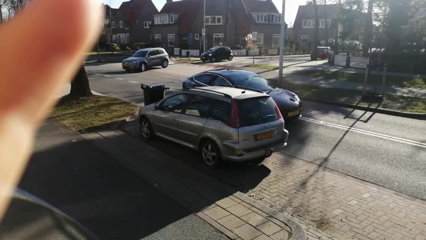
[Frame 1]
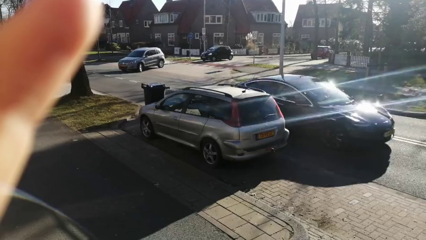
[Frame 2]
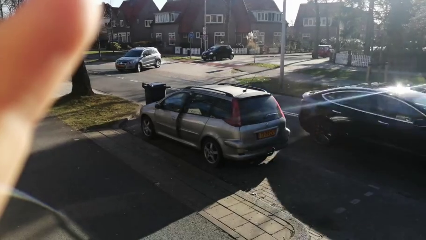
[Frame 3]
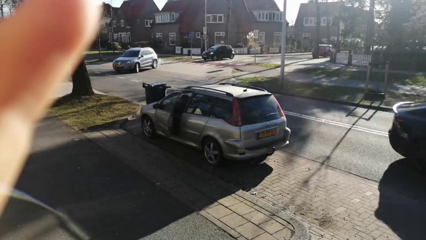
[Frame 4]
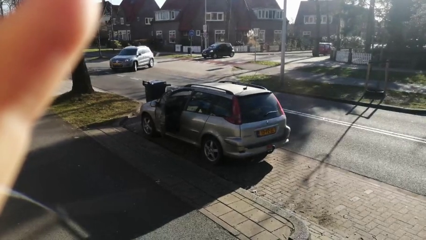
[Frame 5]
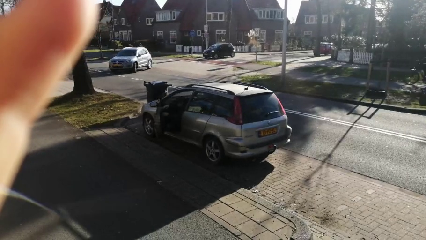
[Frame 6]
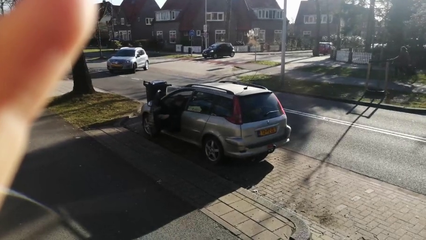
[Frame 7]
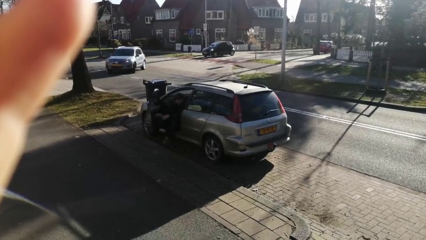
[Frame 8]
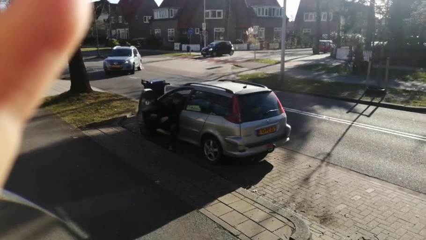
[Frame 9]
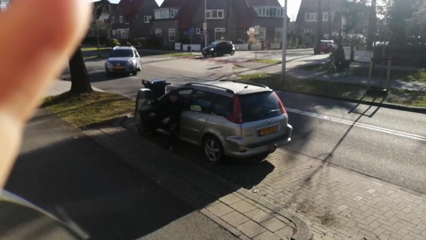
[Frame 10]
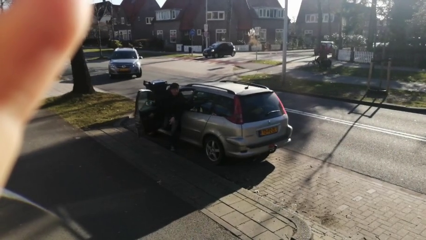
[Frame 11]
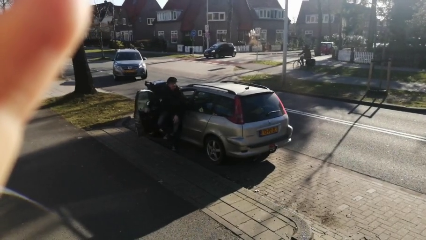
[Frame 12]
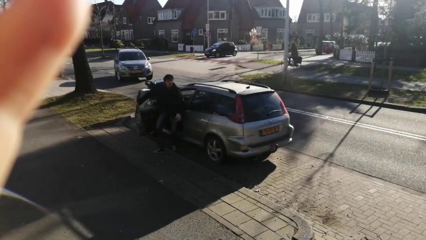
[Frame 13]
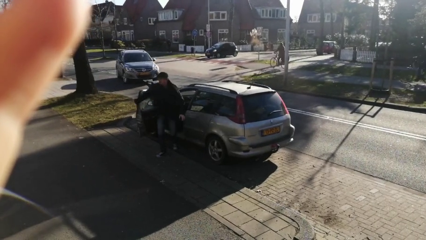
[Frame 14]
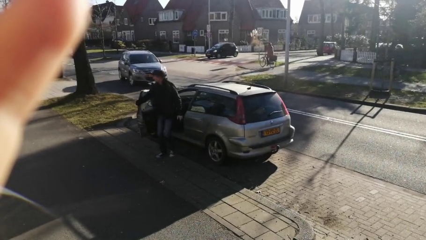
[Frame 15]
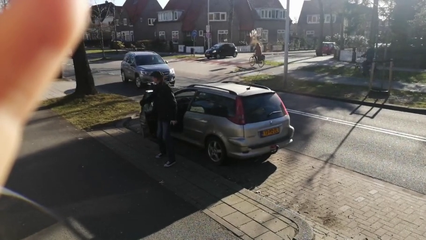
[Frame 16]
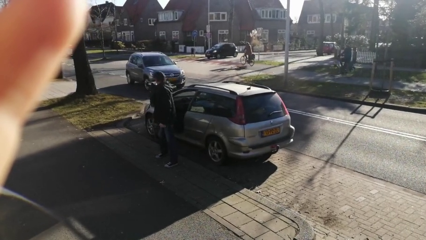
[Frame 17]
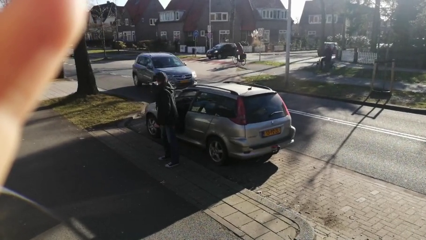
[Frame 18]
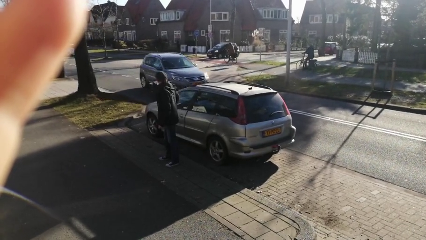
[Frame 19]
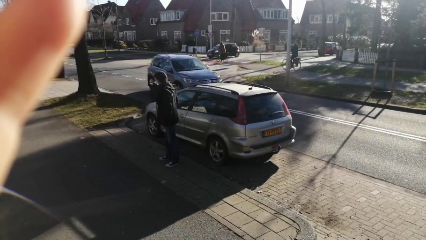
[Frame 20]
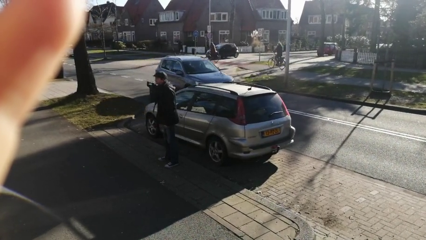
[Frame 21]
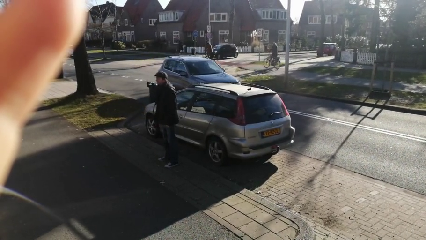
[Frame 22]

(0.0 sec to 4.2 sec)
car drops off person

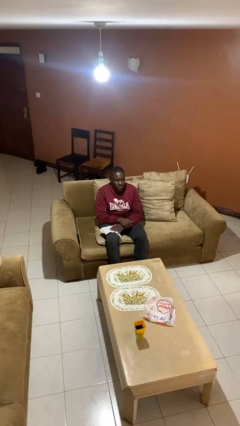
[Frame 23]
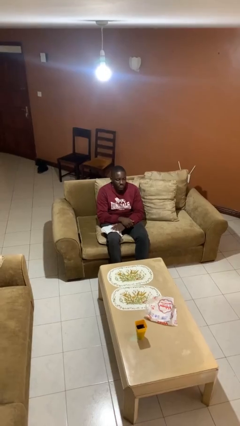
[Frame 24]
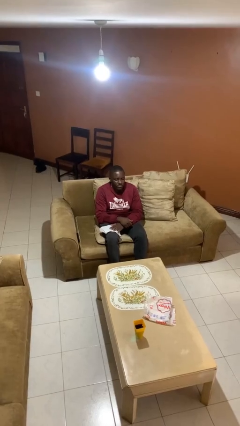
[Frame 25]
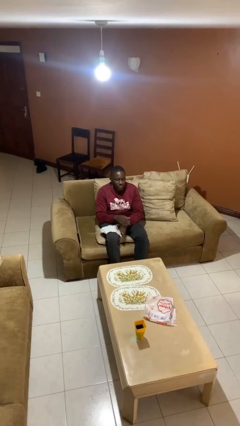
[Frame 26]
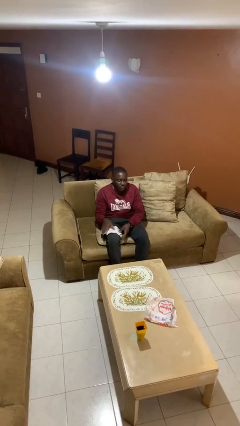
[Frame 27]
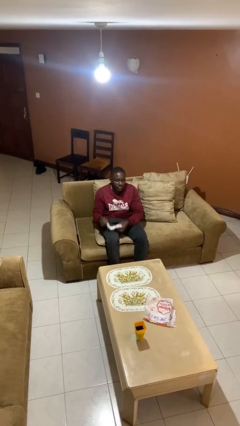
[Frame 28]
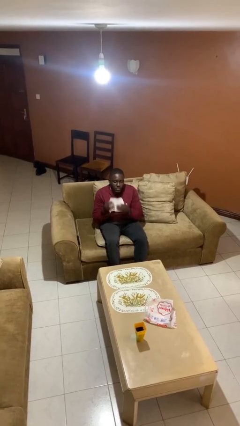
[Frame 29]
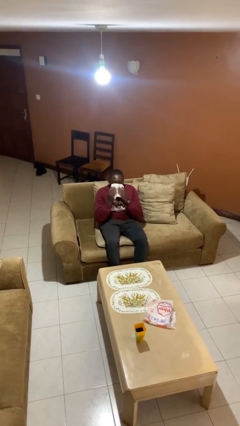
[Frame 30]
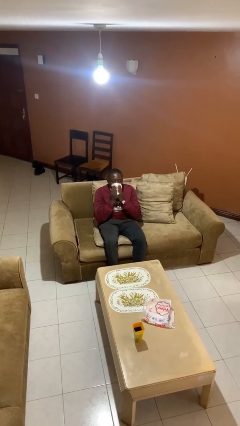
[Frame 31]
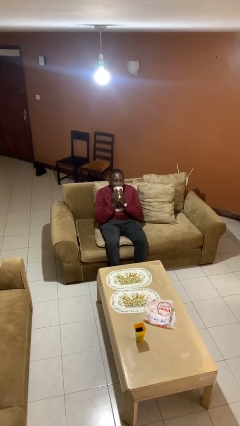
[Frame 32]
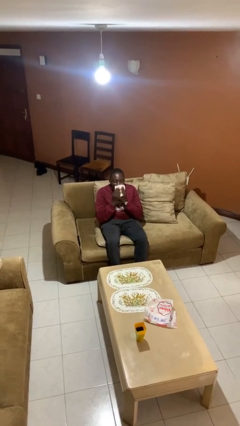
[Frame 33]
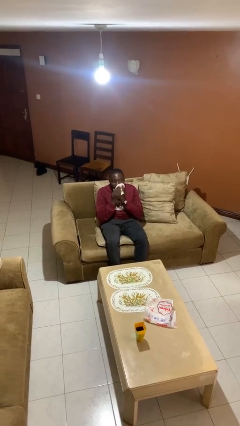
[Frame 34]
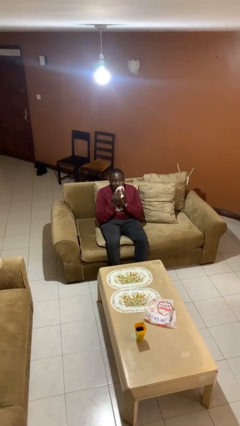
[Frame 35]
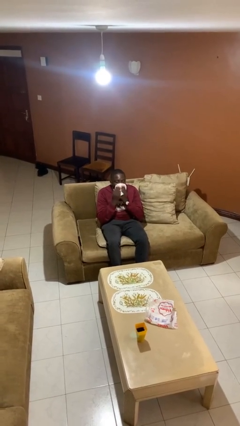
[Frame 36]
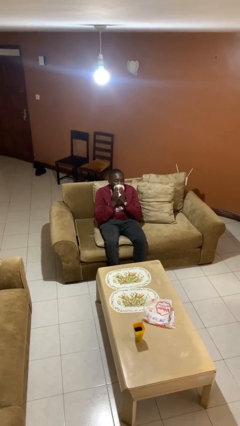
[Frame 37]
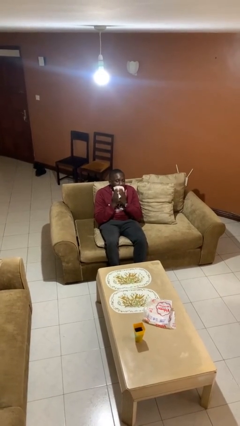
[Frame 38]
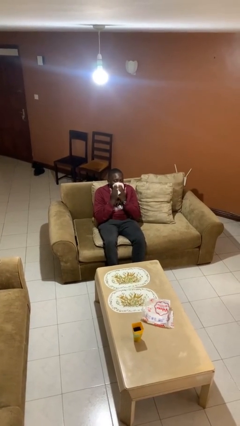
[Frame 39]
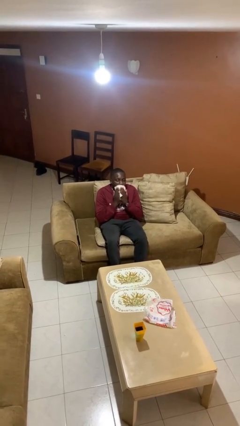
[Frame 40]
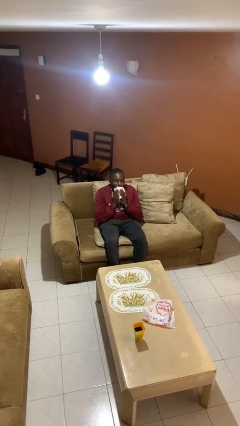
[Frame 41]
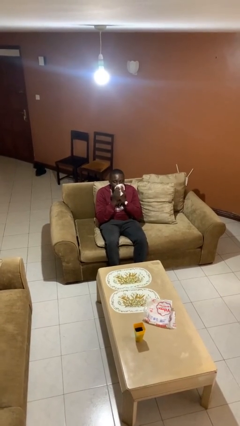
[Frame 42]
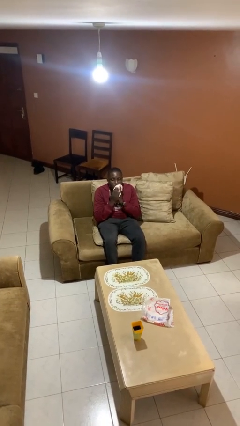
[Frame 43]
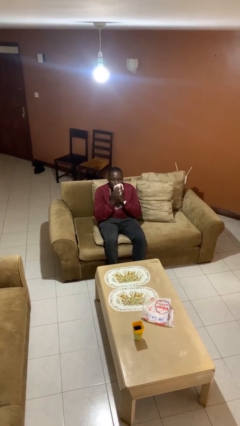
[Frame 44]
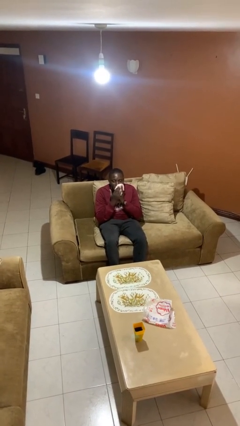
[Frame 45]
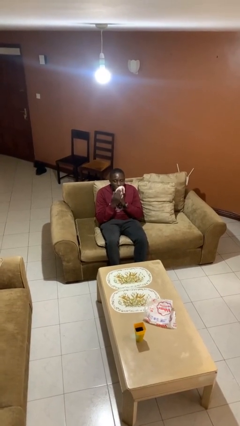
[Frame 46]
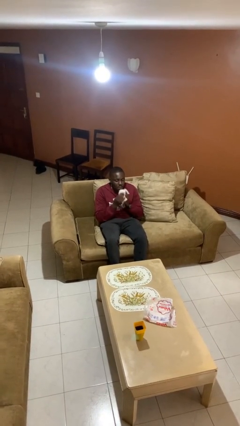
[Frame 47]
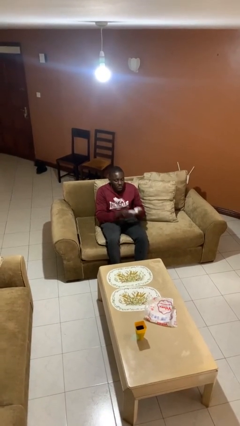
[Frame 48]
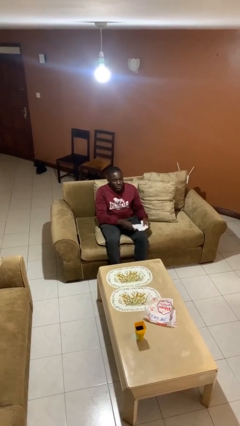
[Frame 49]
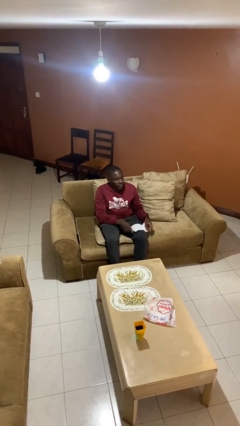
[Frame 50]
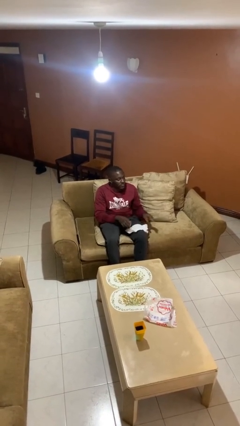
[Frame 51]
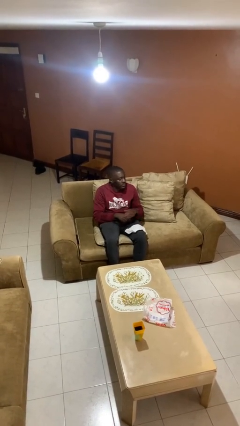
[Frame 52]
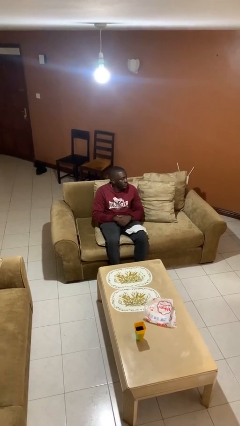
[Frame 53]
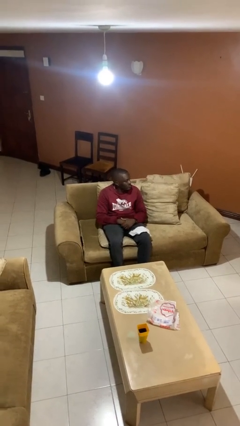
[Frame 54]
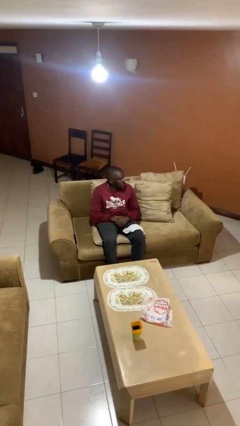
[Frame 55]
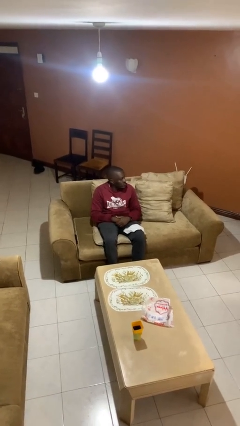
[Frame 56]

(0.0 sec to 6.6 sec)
person wipes mouth with napkin

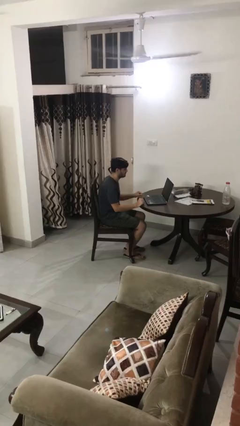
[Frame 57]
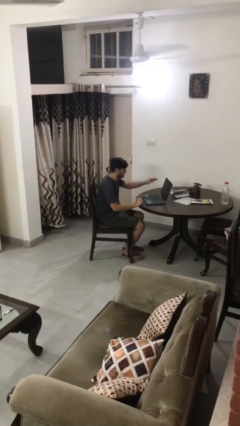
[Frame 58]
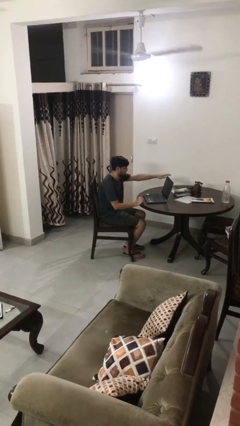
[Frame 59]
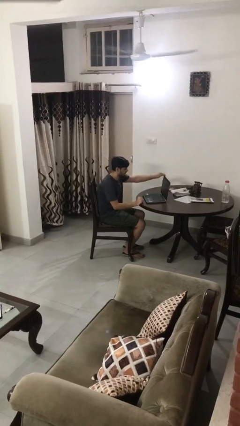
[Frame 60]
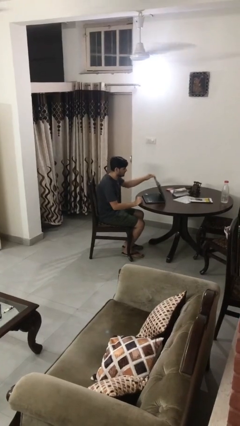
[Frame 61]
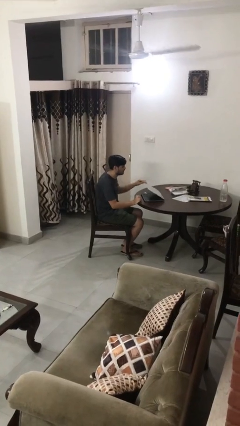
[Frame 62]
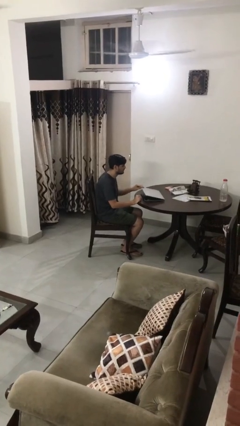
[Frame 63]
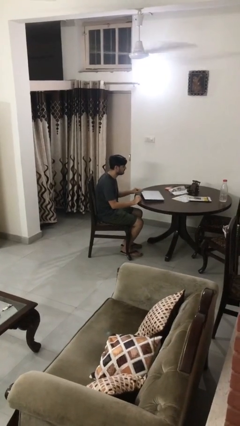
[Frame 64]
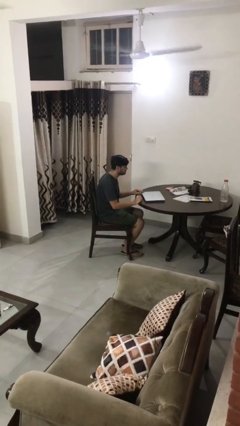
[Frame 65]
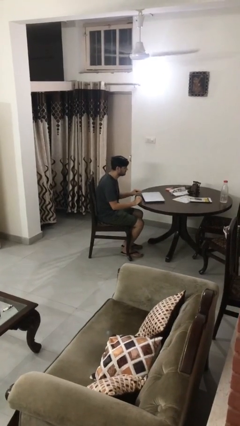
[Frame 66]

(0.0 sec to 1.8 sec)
person closes laptop

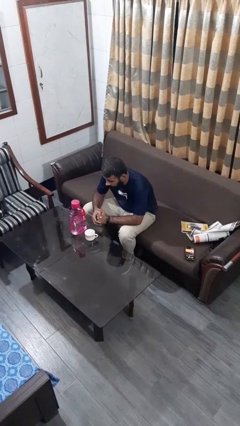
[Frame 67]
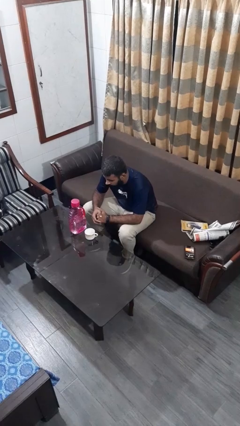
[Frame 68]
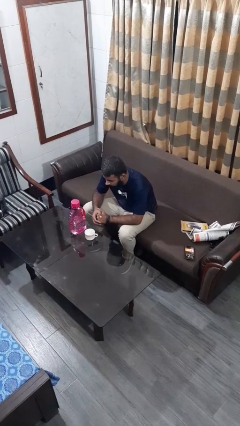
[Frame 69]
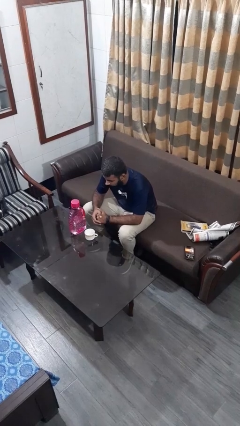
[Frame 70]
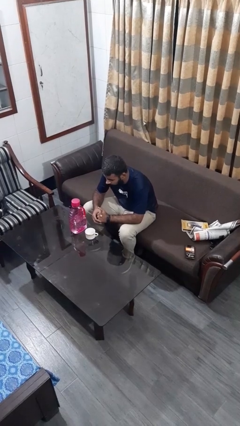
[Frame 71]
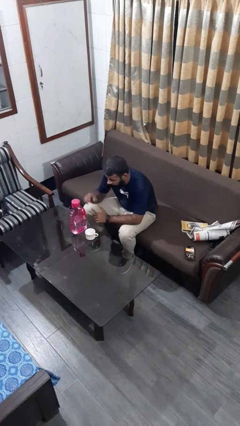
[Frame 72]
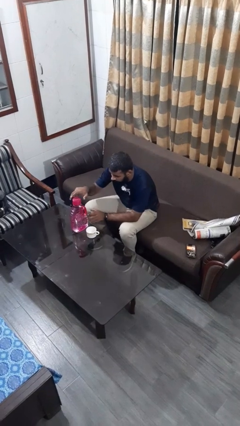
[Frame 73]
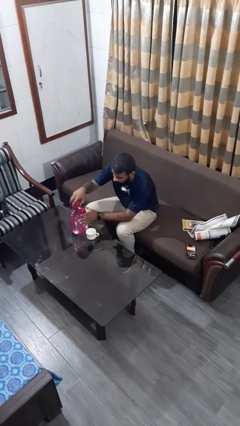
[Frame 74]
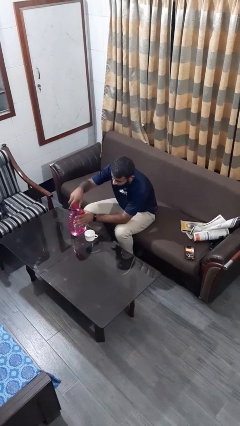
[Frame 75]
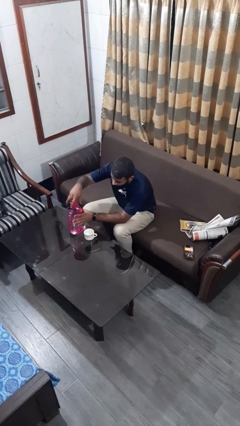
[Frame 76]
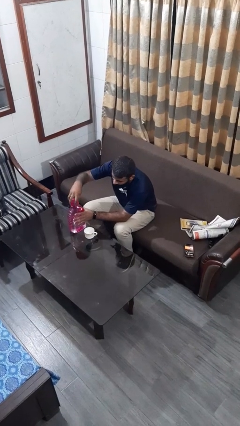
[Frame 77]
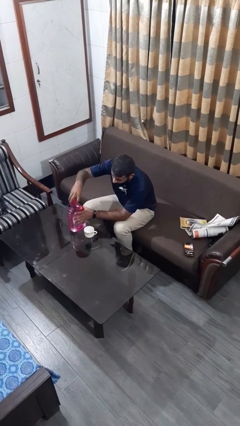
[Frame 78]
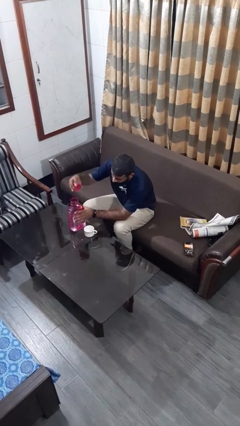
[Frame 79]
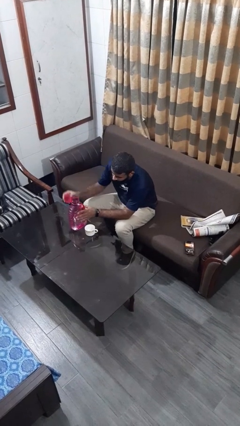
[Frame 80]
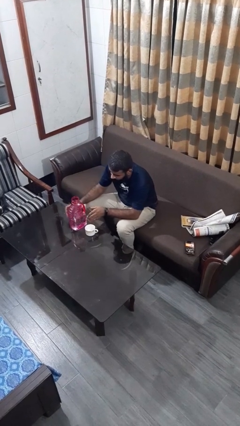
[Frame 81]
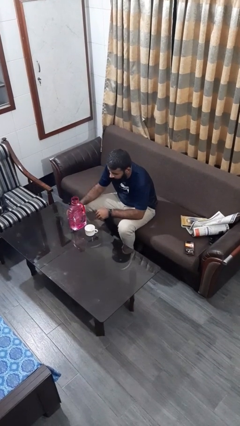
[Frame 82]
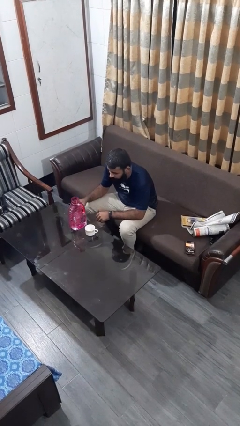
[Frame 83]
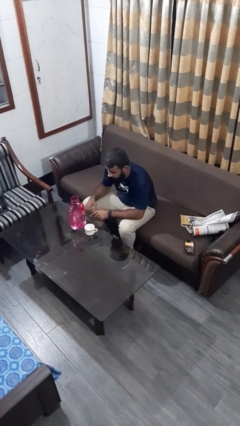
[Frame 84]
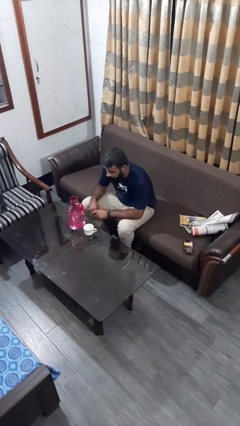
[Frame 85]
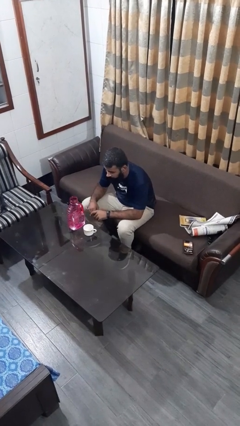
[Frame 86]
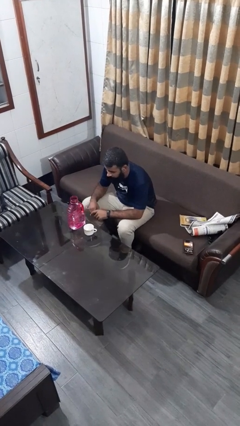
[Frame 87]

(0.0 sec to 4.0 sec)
person unscrews lid from bottle

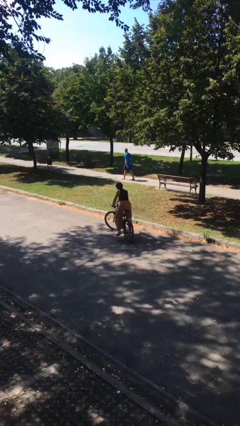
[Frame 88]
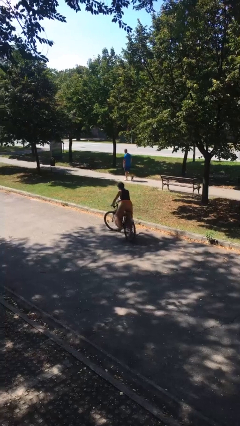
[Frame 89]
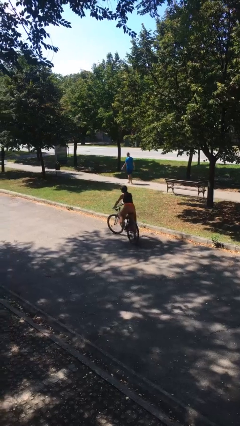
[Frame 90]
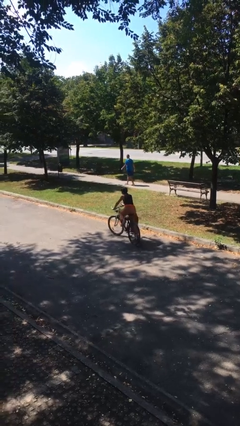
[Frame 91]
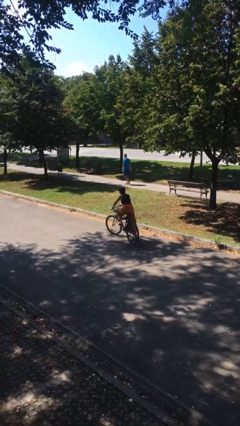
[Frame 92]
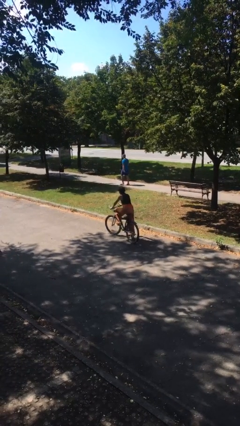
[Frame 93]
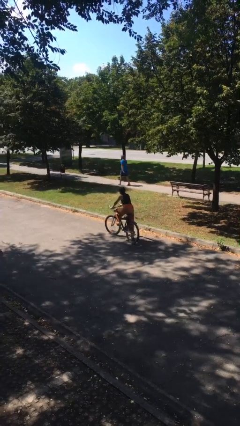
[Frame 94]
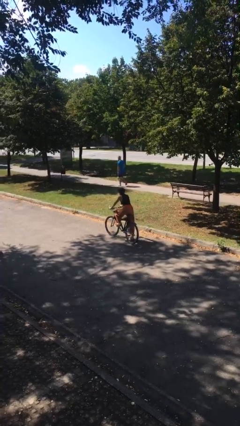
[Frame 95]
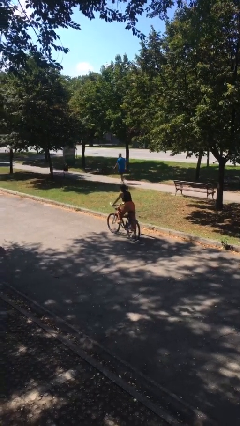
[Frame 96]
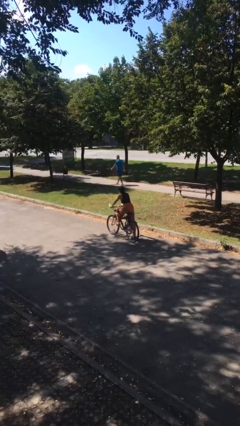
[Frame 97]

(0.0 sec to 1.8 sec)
person rides bicycle
